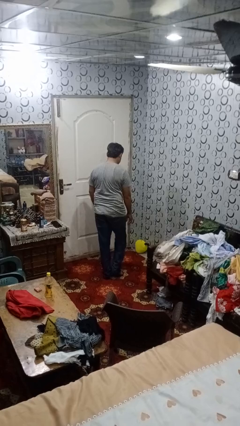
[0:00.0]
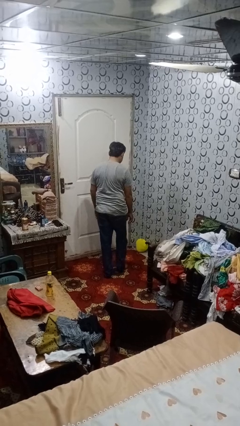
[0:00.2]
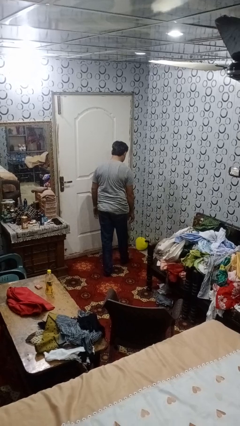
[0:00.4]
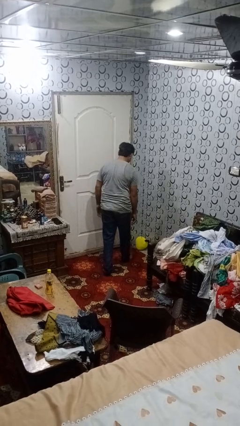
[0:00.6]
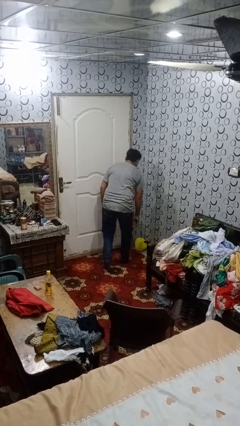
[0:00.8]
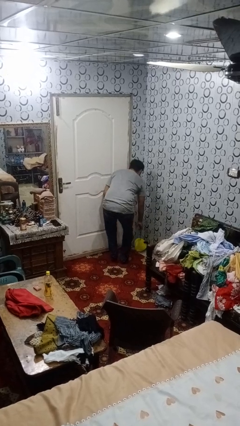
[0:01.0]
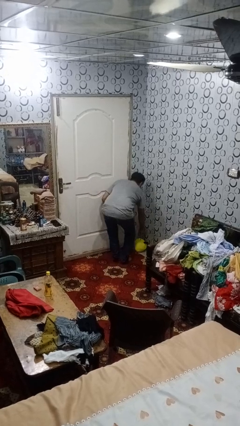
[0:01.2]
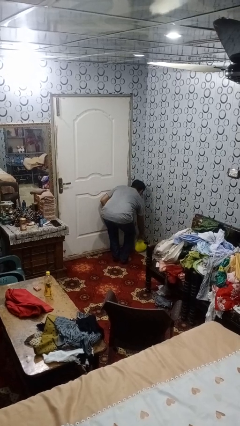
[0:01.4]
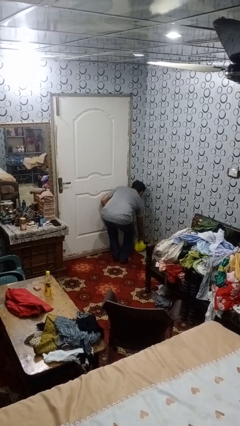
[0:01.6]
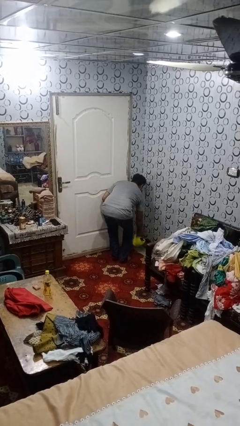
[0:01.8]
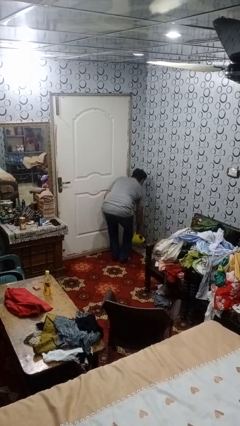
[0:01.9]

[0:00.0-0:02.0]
person picks up object from floor

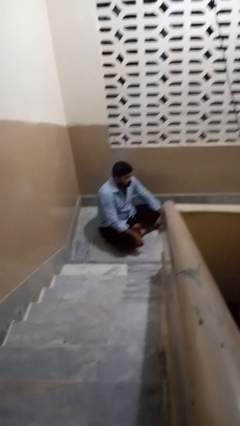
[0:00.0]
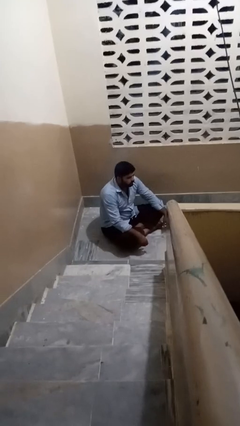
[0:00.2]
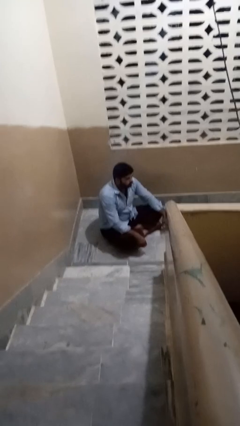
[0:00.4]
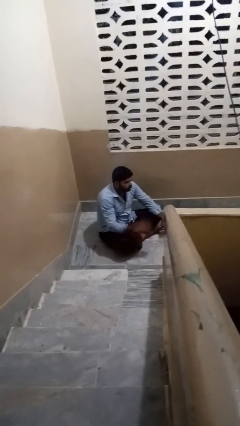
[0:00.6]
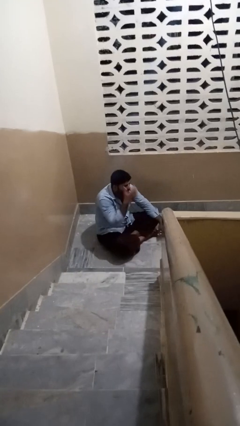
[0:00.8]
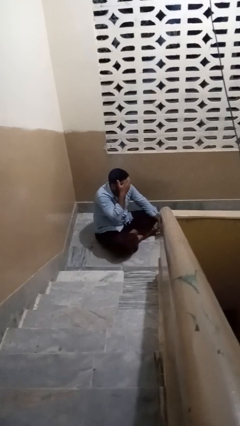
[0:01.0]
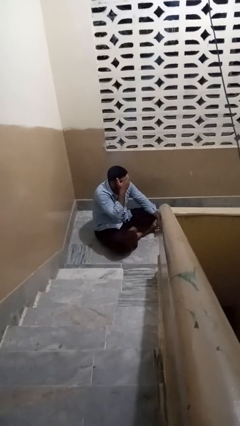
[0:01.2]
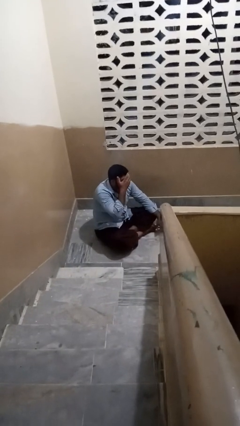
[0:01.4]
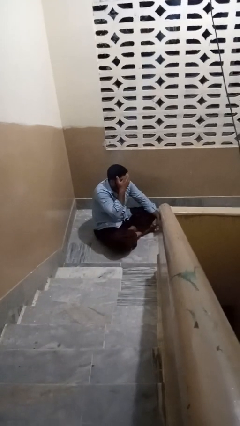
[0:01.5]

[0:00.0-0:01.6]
person covers face with hands

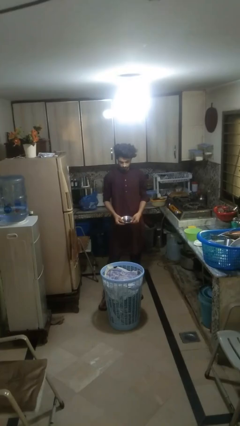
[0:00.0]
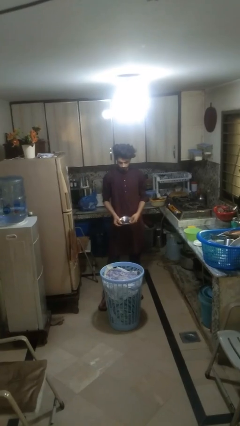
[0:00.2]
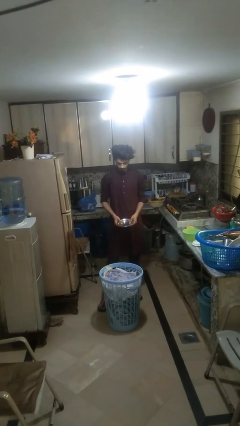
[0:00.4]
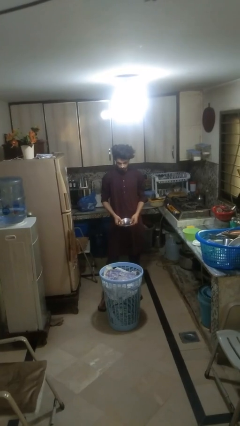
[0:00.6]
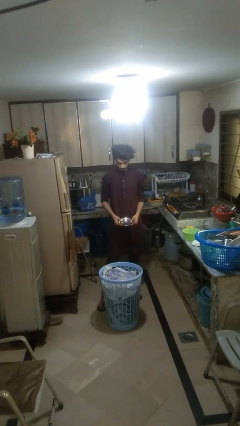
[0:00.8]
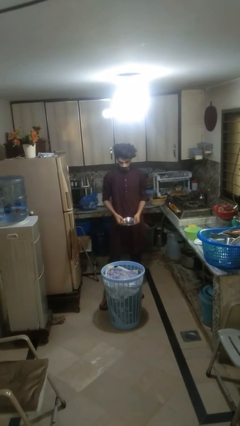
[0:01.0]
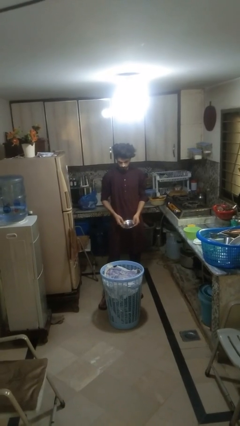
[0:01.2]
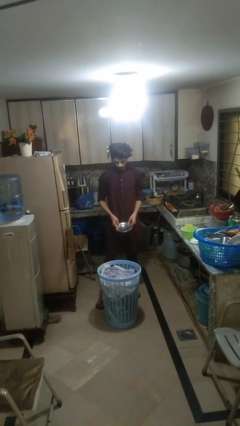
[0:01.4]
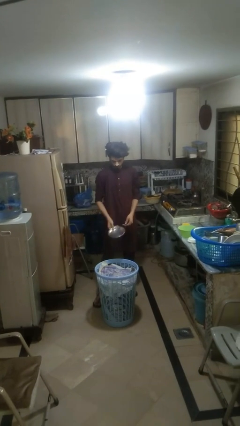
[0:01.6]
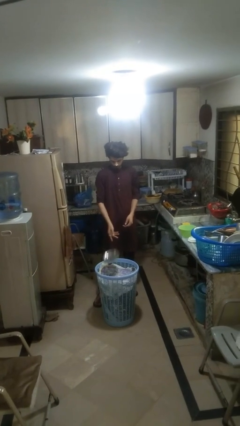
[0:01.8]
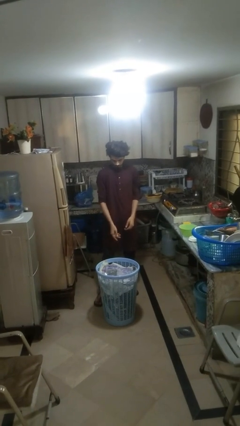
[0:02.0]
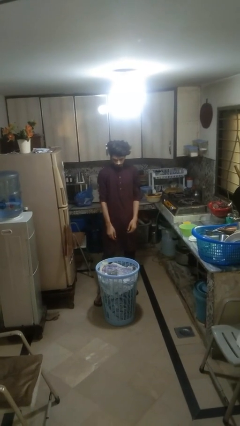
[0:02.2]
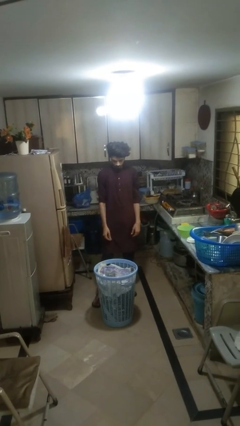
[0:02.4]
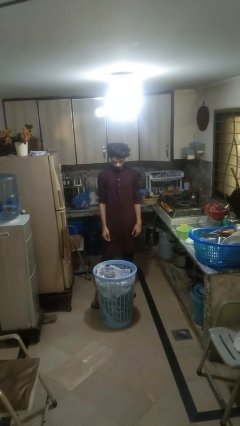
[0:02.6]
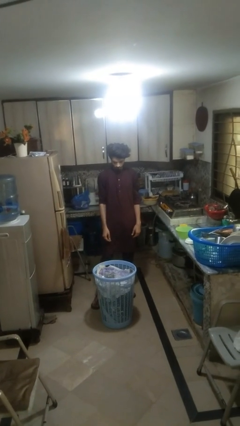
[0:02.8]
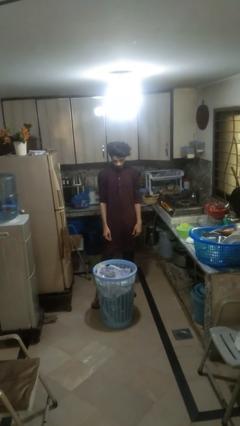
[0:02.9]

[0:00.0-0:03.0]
person puts object into basket

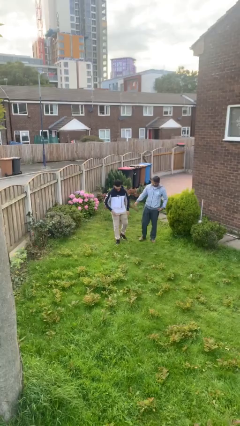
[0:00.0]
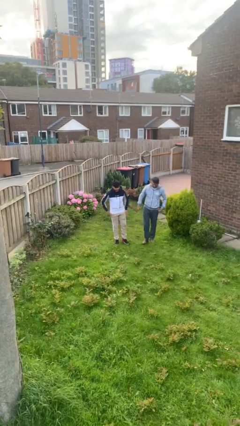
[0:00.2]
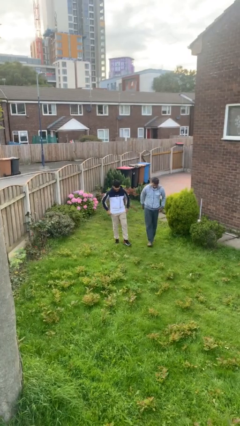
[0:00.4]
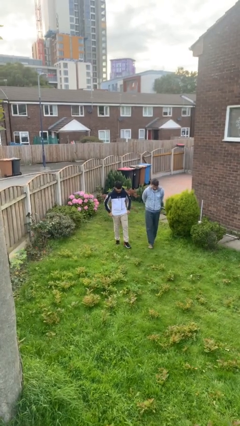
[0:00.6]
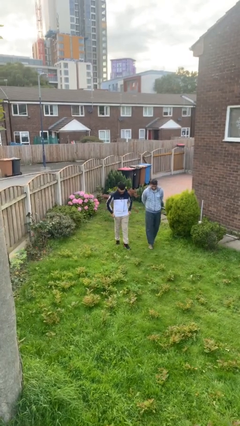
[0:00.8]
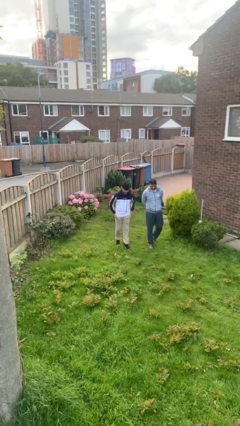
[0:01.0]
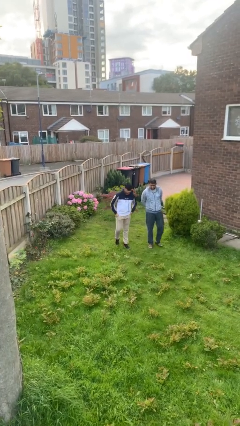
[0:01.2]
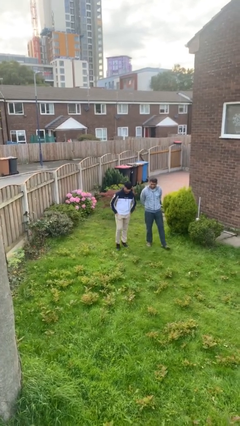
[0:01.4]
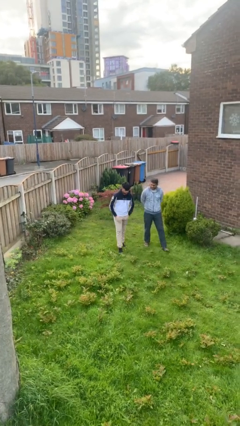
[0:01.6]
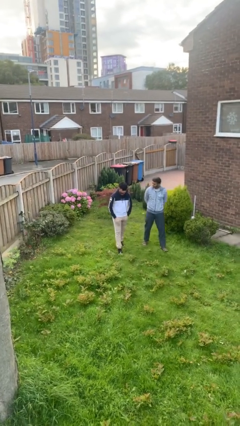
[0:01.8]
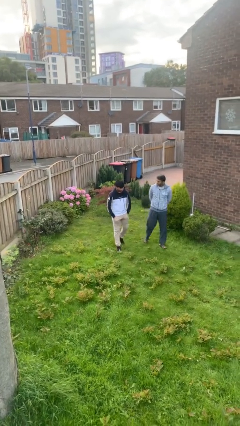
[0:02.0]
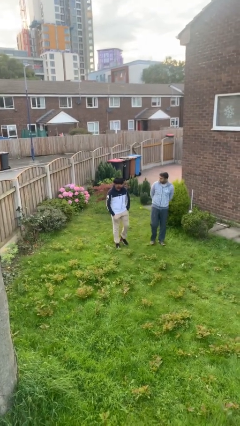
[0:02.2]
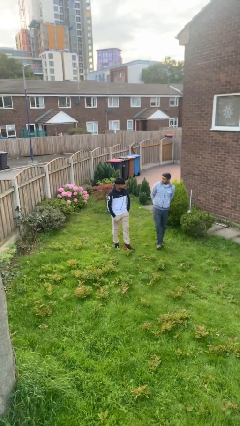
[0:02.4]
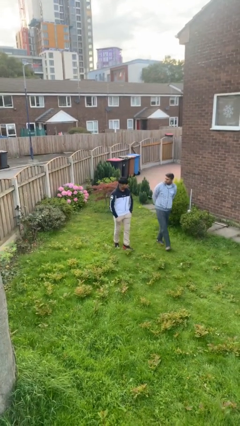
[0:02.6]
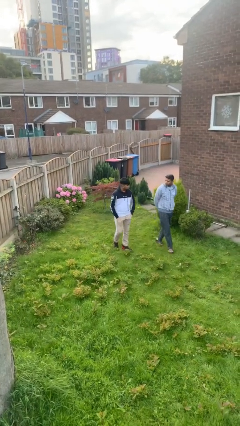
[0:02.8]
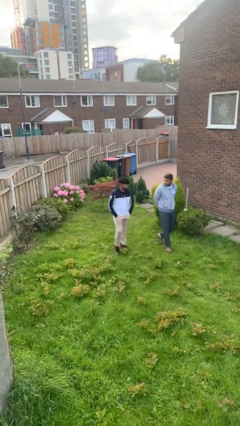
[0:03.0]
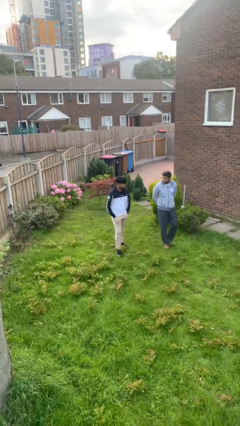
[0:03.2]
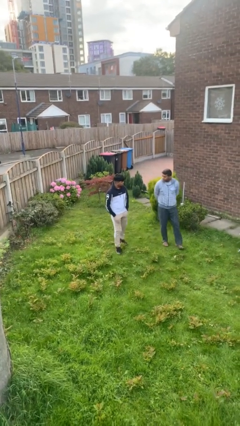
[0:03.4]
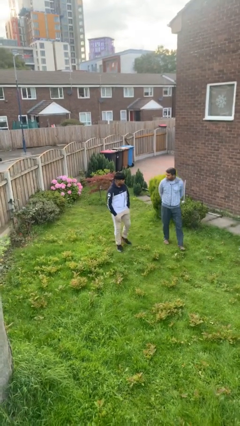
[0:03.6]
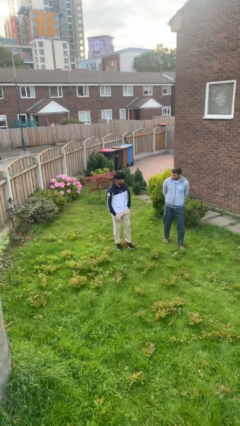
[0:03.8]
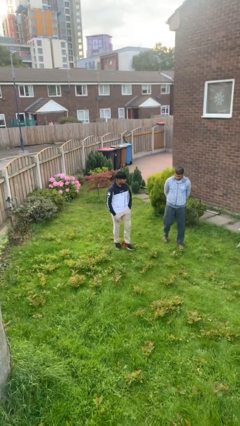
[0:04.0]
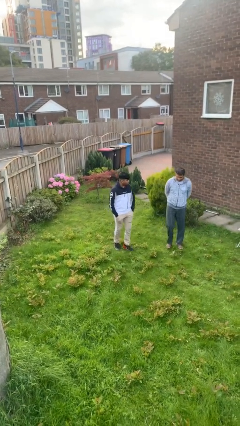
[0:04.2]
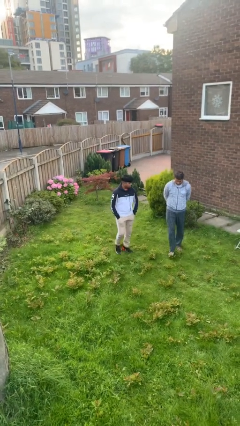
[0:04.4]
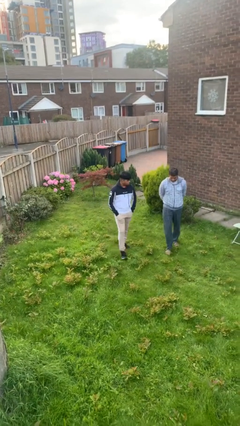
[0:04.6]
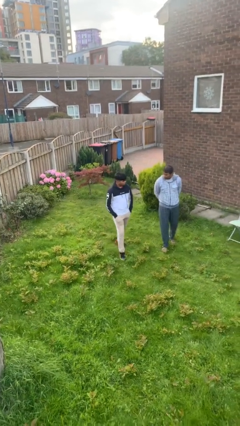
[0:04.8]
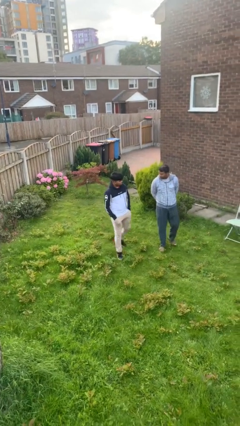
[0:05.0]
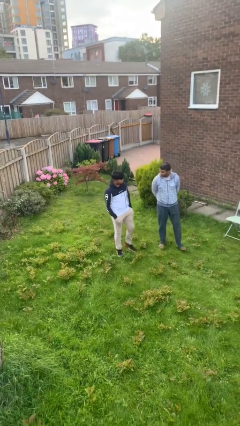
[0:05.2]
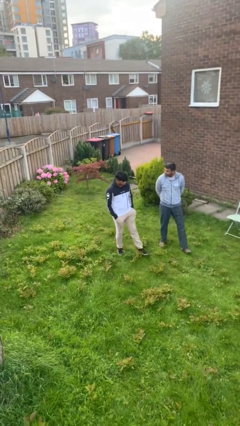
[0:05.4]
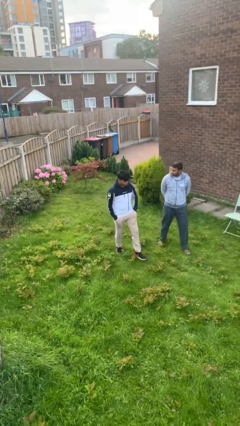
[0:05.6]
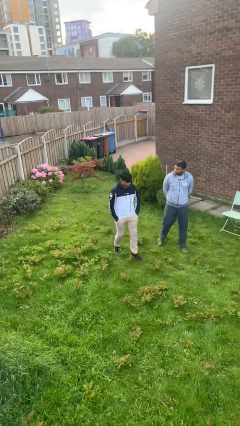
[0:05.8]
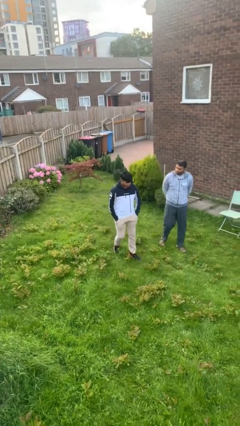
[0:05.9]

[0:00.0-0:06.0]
person talks to person

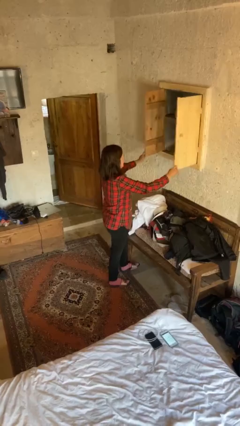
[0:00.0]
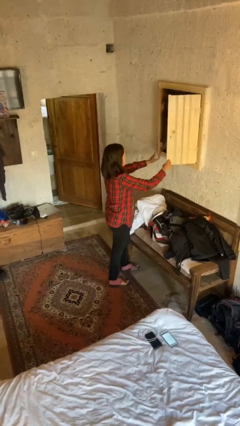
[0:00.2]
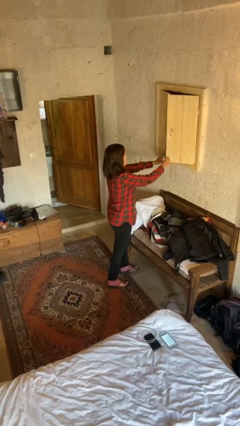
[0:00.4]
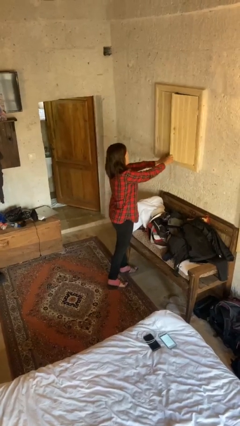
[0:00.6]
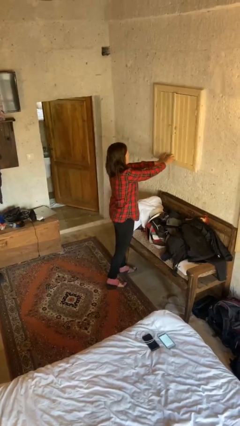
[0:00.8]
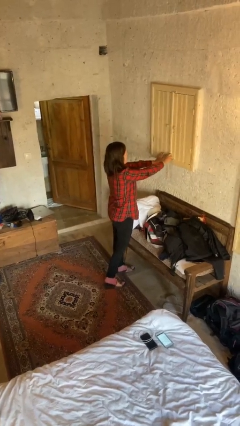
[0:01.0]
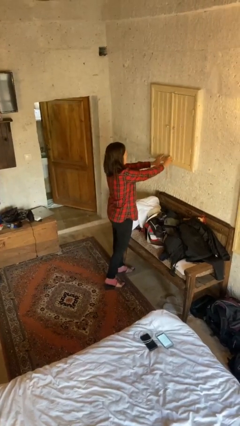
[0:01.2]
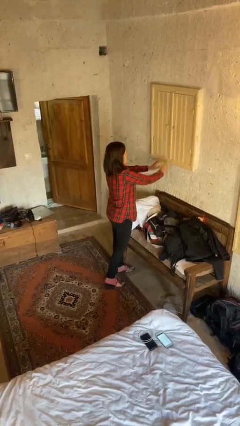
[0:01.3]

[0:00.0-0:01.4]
person closes closet door

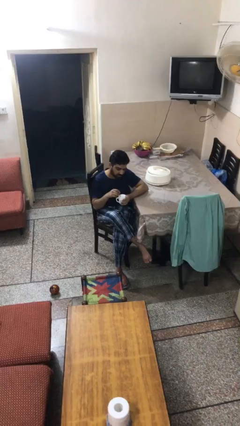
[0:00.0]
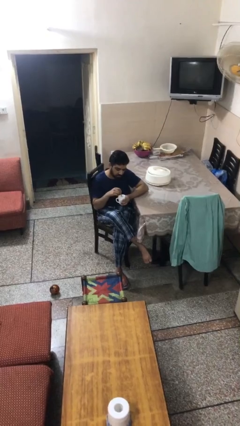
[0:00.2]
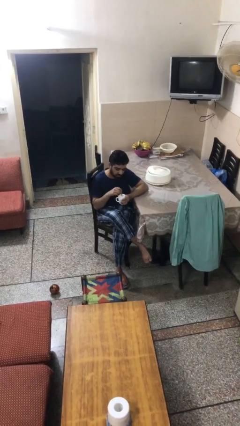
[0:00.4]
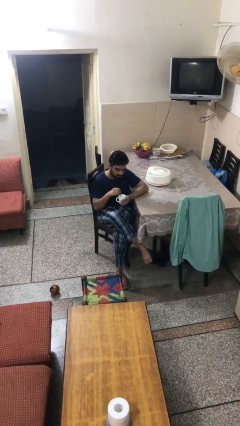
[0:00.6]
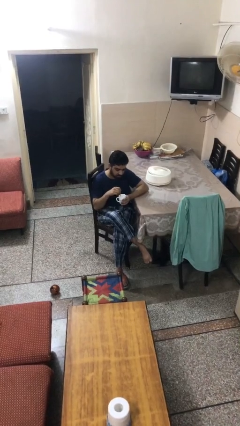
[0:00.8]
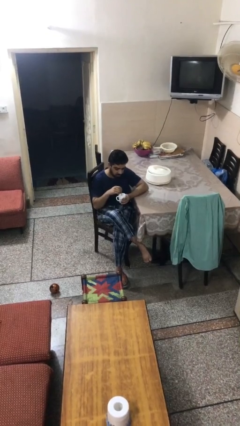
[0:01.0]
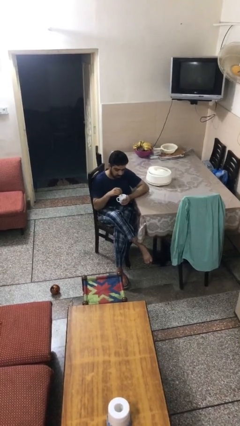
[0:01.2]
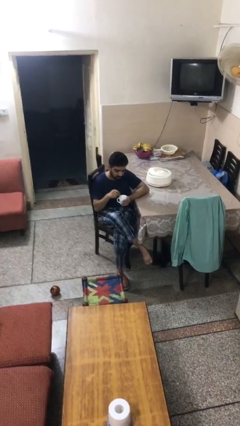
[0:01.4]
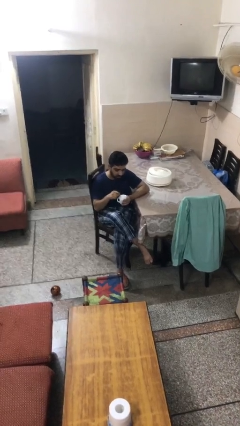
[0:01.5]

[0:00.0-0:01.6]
person stirs mug

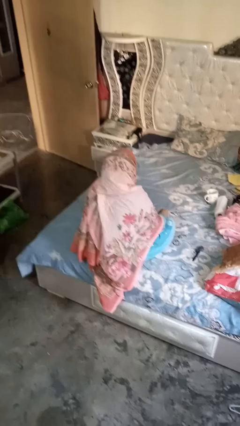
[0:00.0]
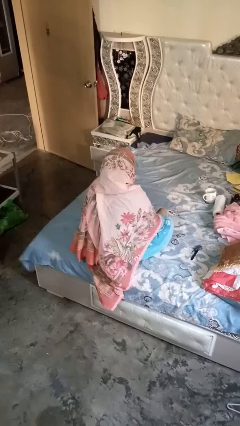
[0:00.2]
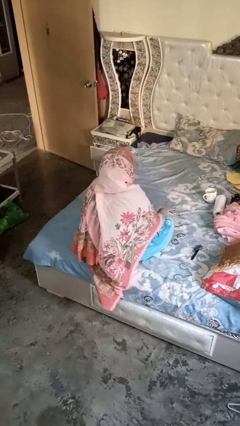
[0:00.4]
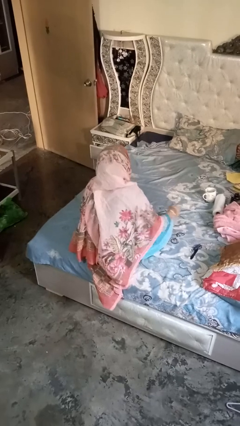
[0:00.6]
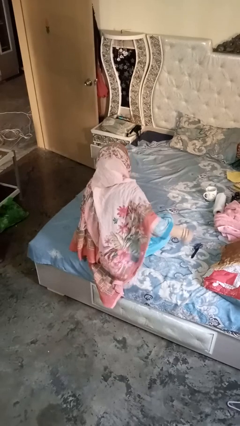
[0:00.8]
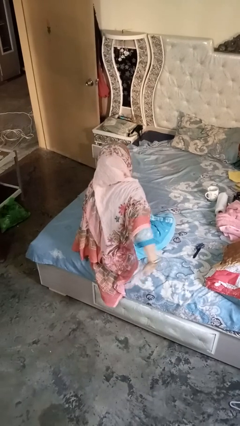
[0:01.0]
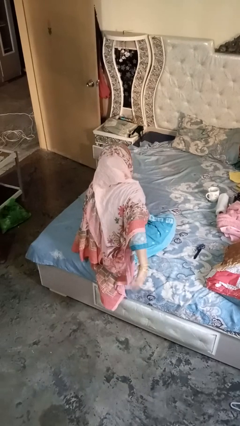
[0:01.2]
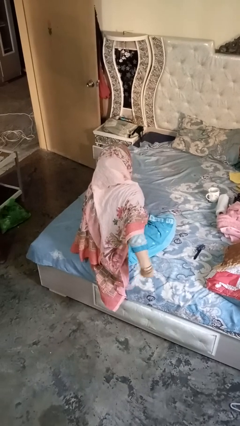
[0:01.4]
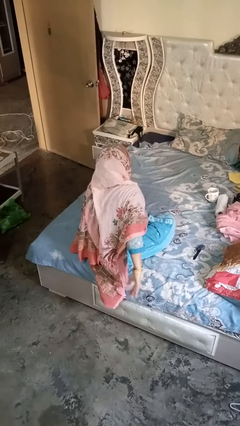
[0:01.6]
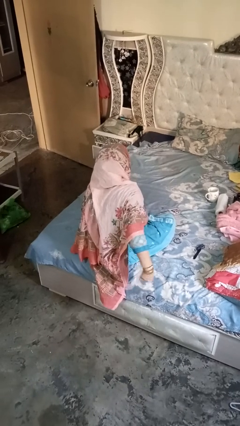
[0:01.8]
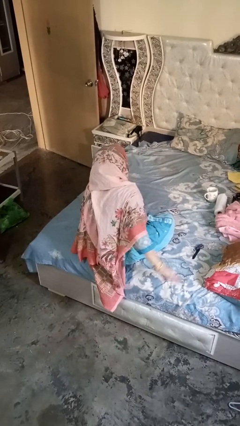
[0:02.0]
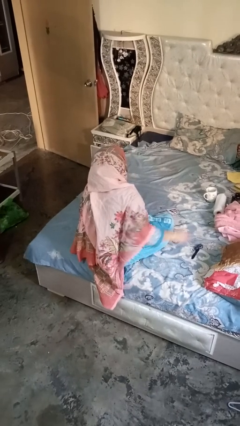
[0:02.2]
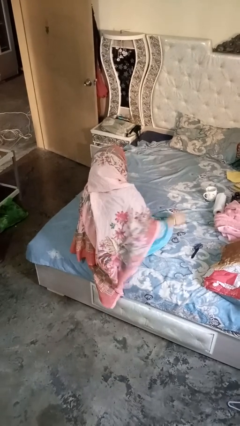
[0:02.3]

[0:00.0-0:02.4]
person gestures behind me
